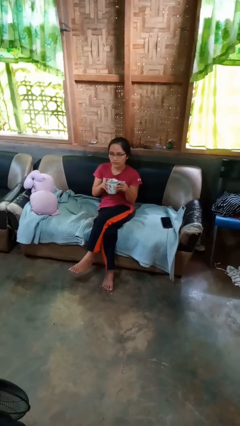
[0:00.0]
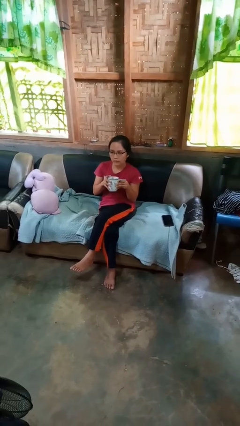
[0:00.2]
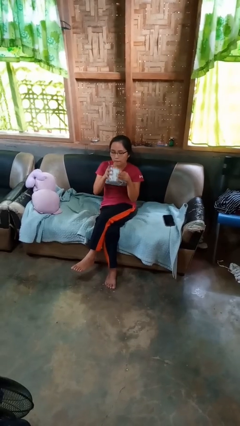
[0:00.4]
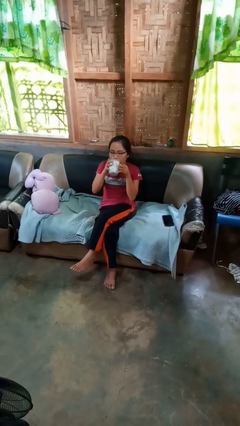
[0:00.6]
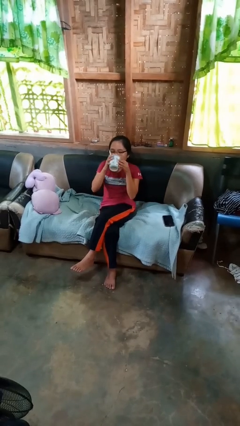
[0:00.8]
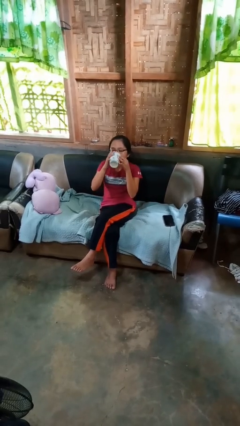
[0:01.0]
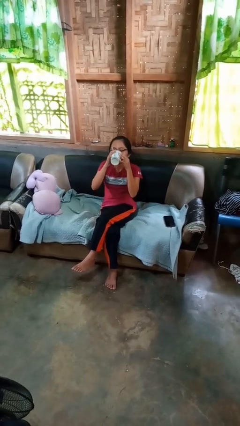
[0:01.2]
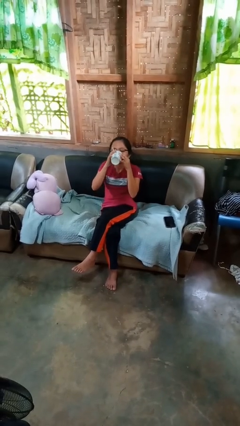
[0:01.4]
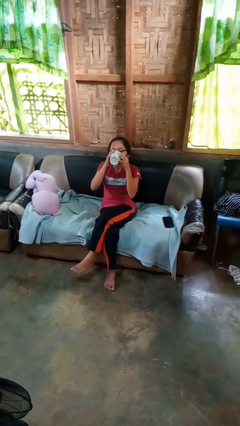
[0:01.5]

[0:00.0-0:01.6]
person drinks from mug

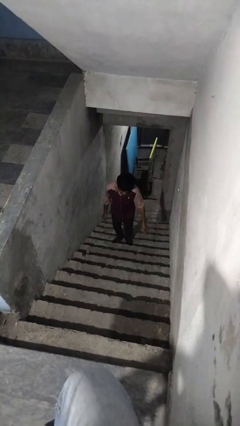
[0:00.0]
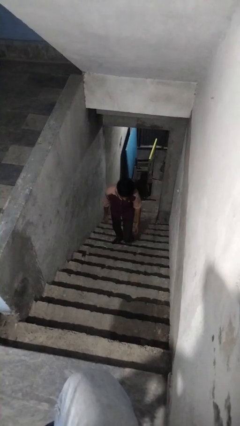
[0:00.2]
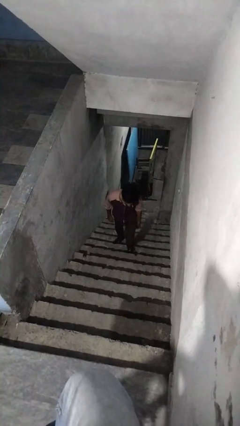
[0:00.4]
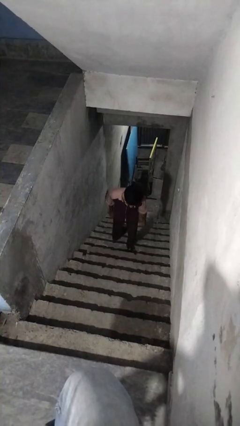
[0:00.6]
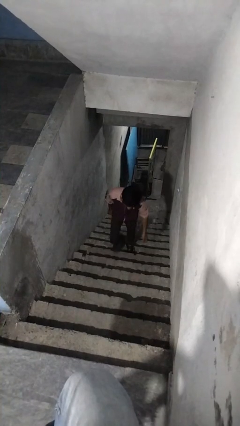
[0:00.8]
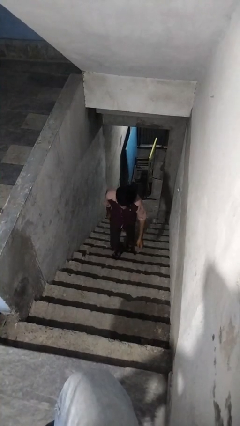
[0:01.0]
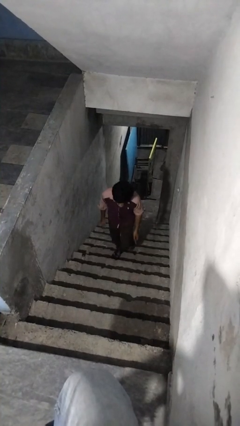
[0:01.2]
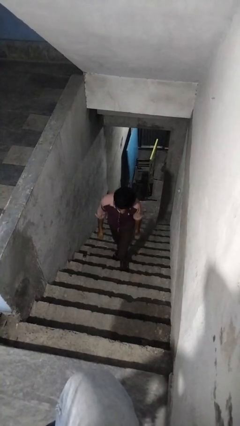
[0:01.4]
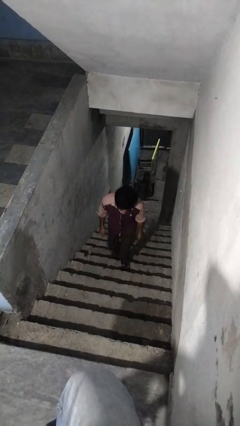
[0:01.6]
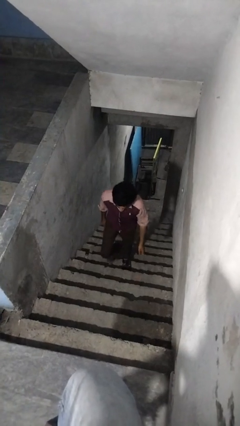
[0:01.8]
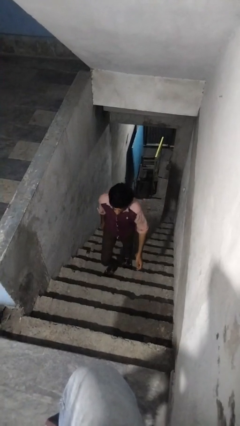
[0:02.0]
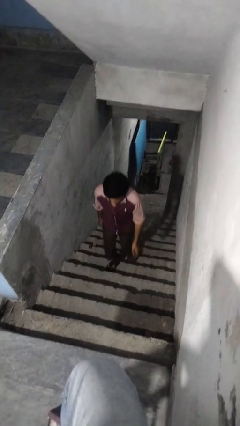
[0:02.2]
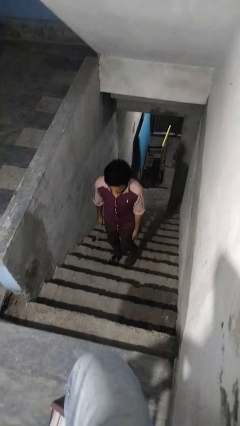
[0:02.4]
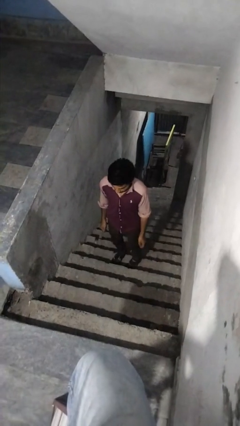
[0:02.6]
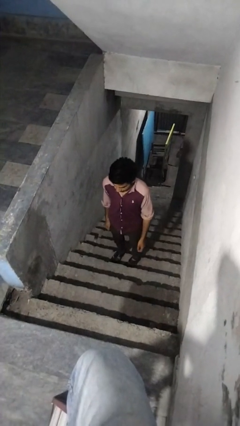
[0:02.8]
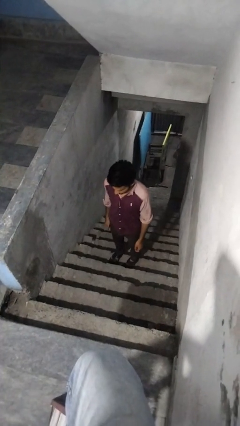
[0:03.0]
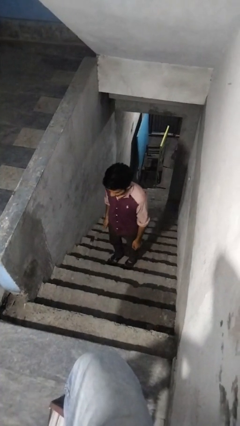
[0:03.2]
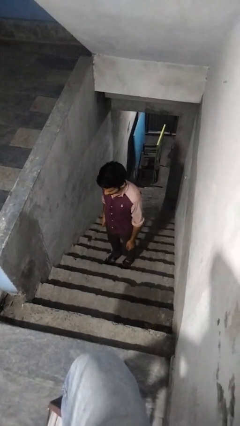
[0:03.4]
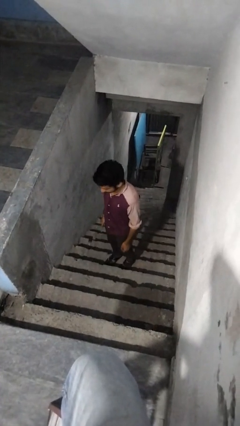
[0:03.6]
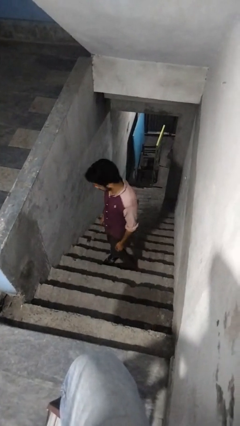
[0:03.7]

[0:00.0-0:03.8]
person climbs up stairs

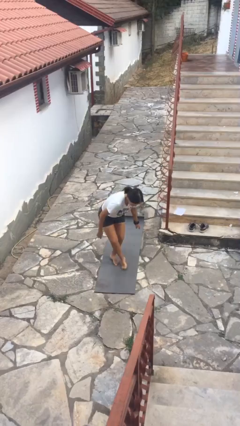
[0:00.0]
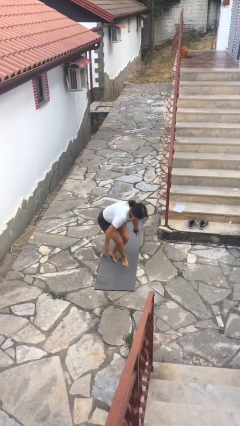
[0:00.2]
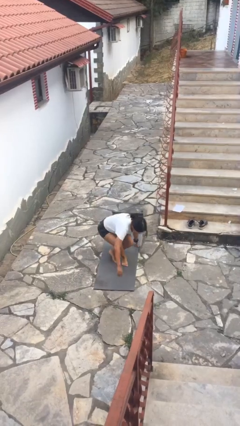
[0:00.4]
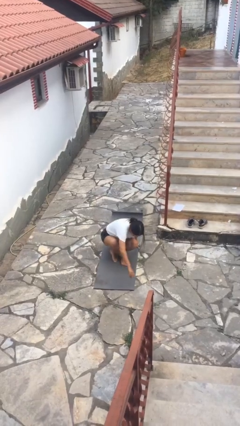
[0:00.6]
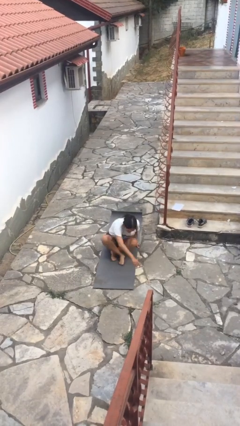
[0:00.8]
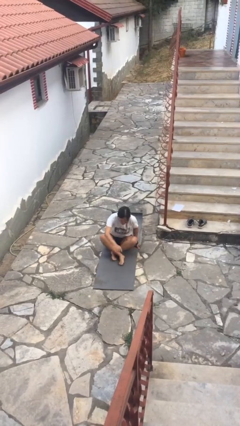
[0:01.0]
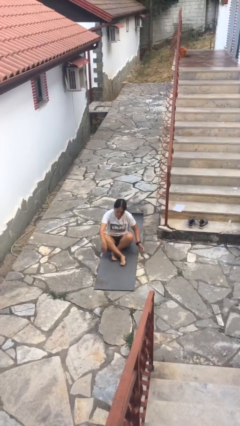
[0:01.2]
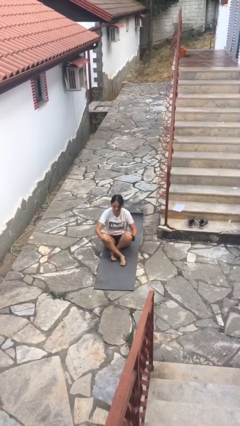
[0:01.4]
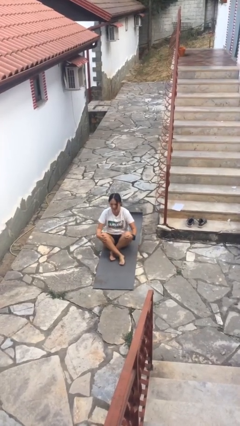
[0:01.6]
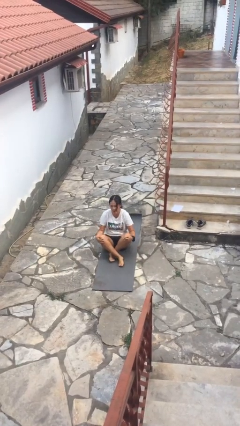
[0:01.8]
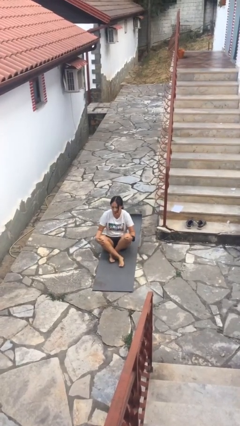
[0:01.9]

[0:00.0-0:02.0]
person sits crisscross

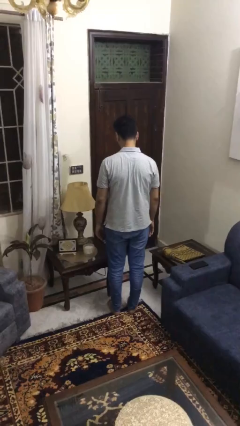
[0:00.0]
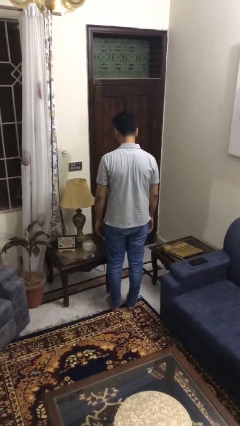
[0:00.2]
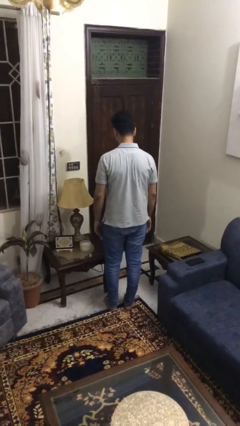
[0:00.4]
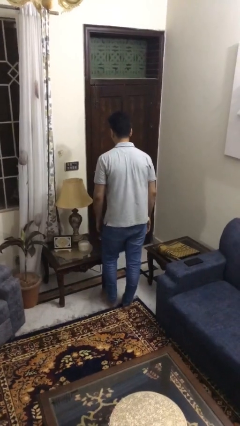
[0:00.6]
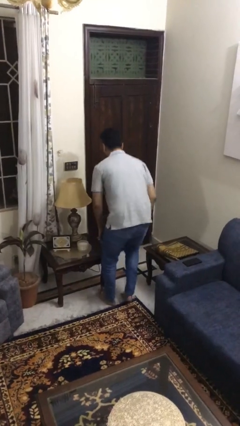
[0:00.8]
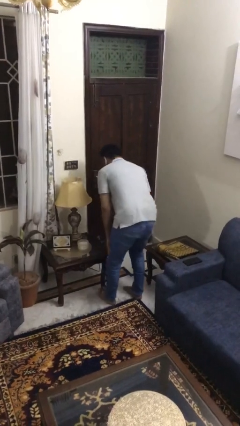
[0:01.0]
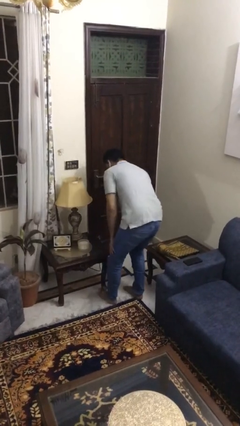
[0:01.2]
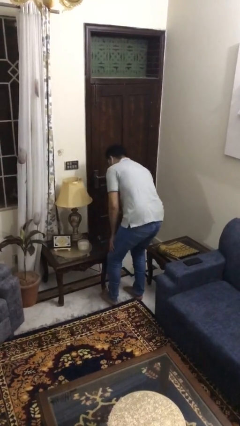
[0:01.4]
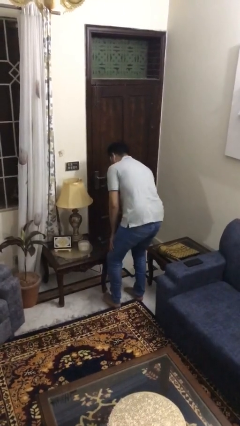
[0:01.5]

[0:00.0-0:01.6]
person stubs toe

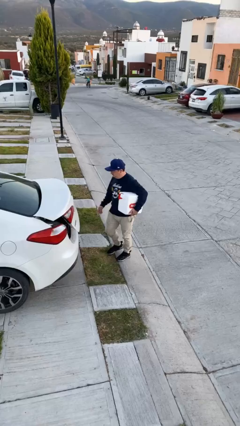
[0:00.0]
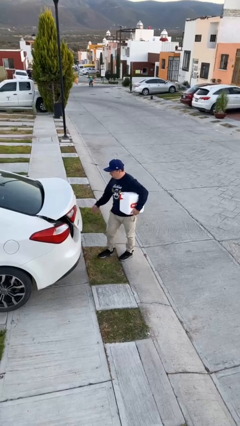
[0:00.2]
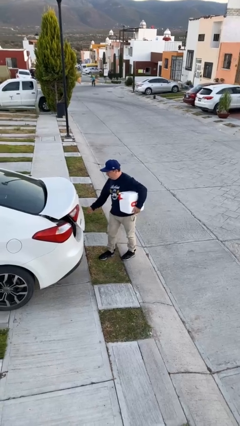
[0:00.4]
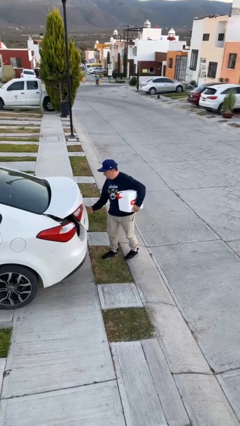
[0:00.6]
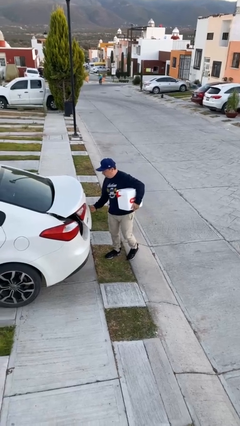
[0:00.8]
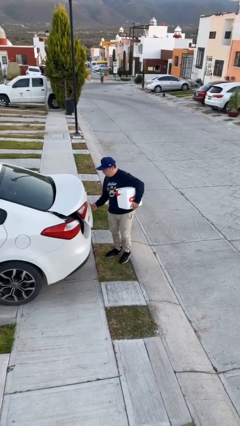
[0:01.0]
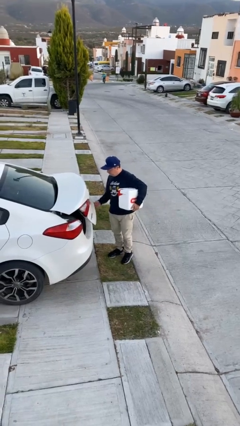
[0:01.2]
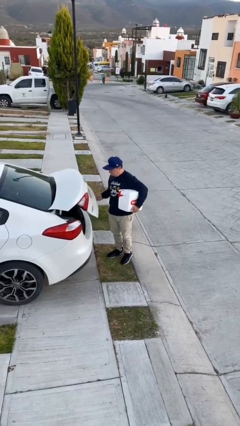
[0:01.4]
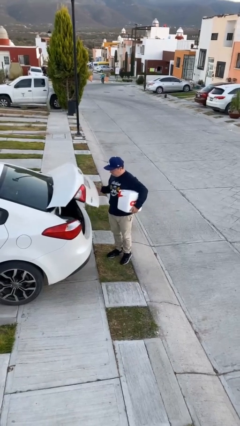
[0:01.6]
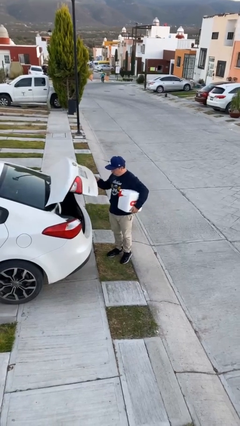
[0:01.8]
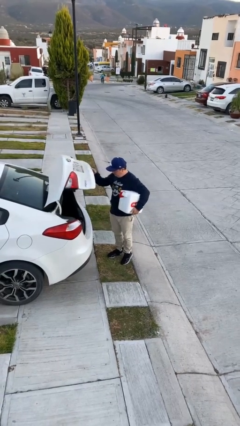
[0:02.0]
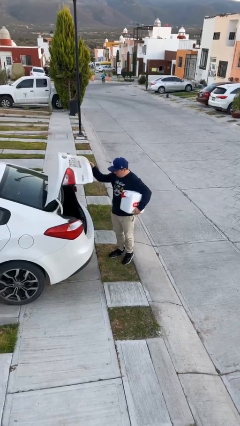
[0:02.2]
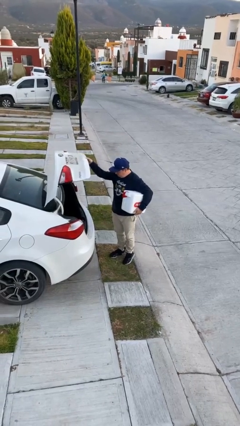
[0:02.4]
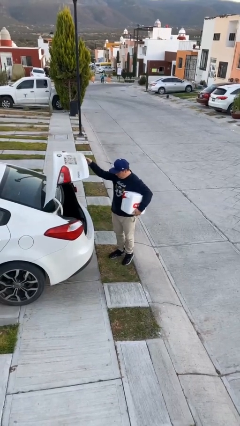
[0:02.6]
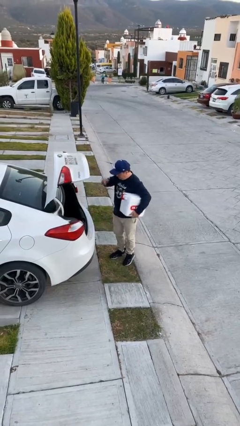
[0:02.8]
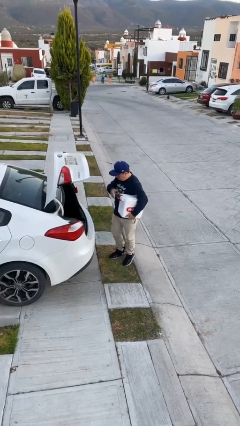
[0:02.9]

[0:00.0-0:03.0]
person opens car trunk

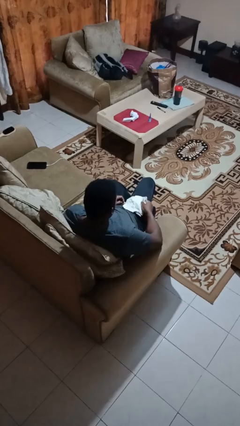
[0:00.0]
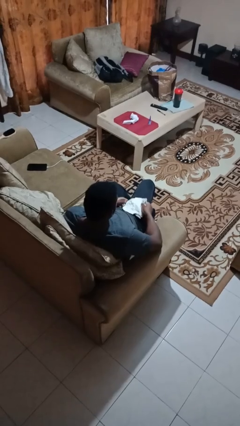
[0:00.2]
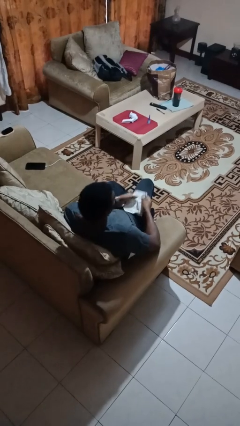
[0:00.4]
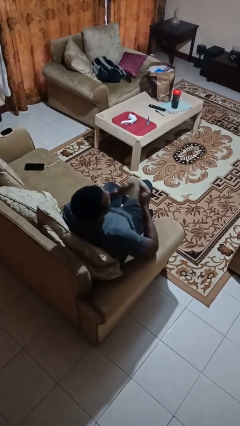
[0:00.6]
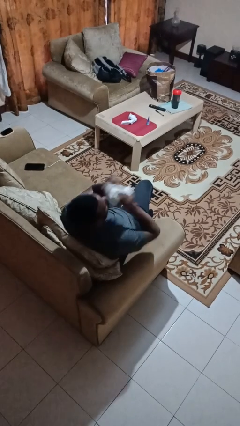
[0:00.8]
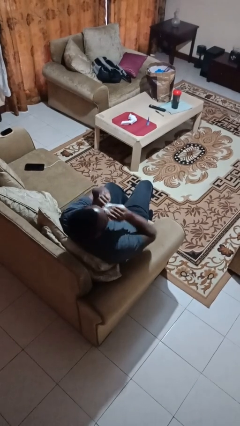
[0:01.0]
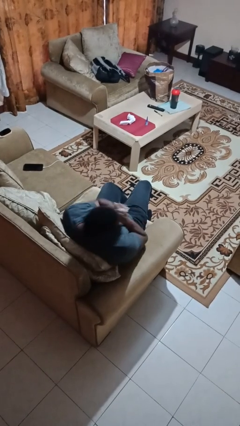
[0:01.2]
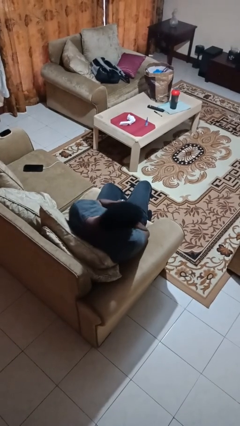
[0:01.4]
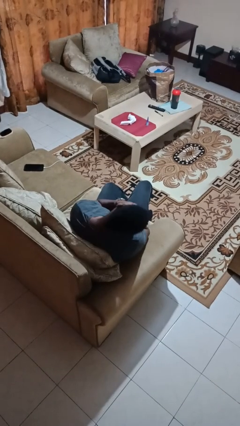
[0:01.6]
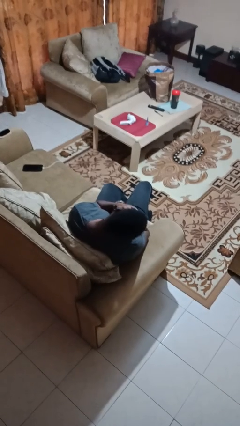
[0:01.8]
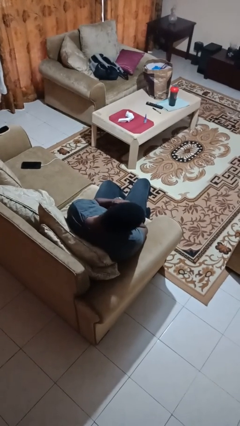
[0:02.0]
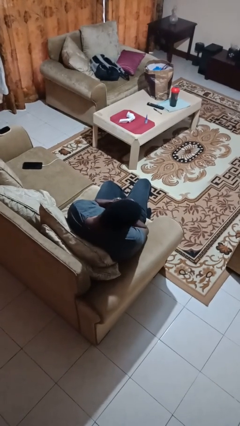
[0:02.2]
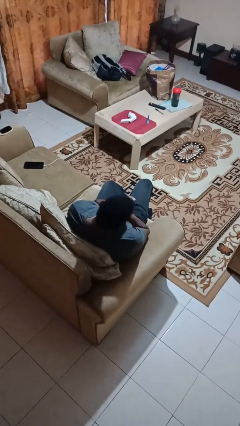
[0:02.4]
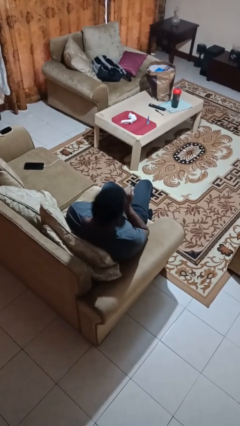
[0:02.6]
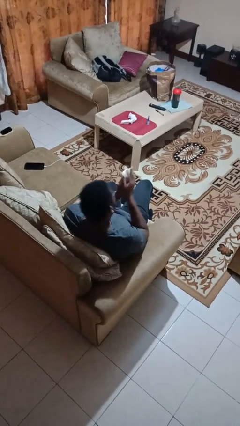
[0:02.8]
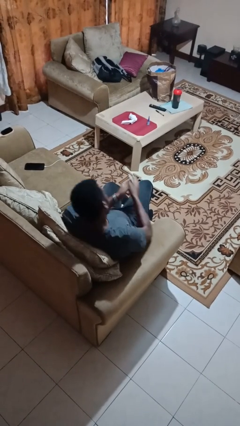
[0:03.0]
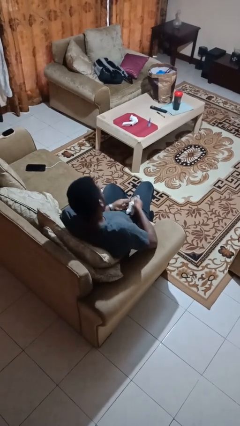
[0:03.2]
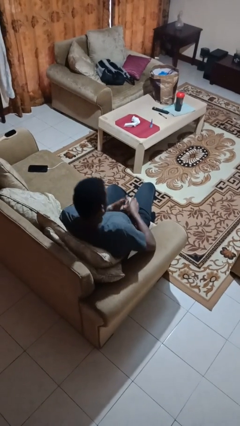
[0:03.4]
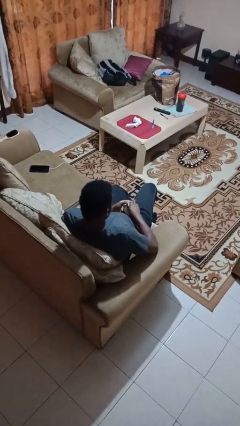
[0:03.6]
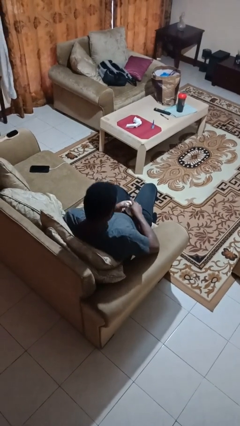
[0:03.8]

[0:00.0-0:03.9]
person blows nose

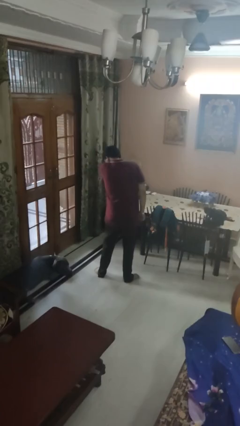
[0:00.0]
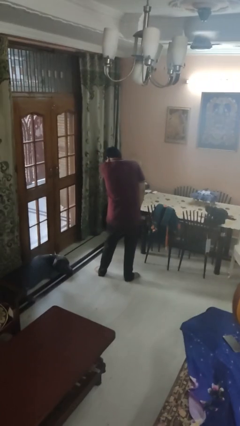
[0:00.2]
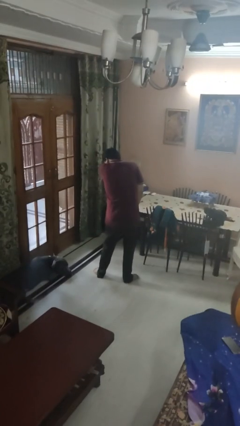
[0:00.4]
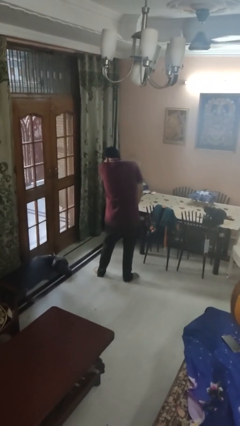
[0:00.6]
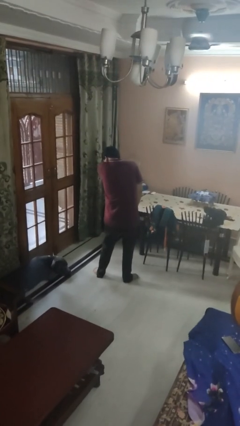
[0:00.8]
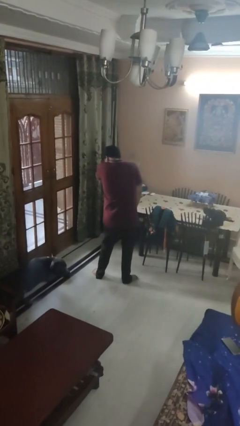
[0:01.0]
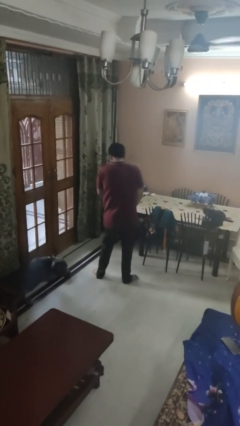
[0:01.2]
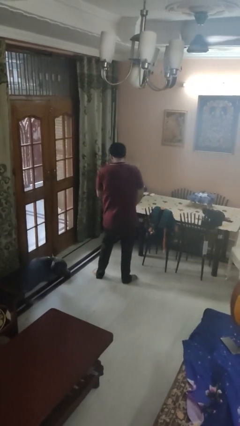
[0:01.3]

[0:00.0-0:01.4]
person sneezes into arm
